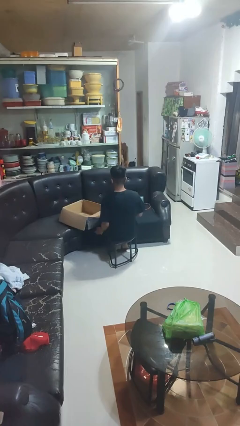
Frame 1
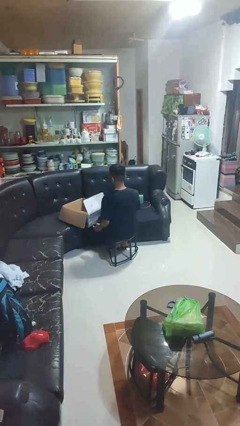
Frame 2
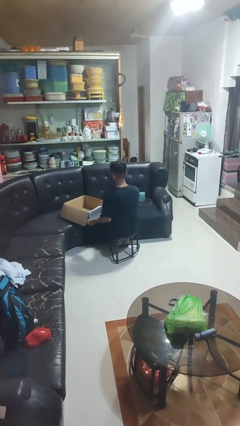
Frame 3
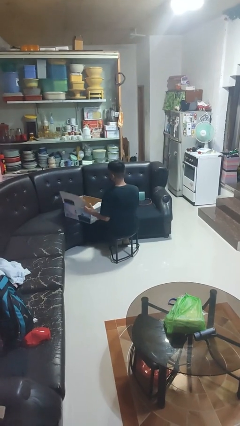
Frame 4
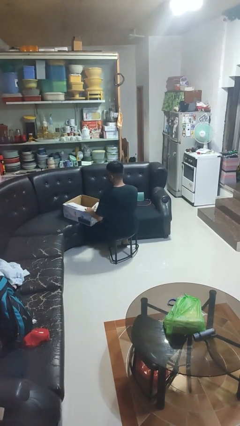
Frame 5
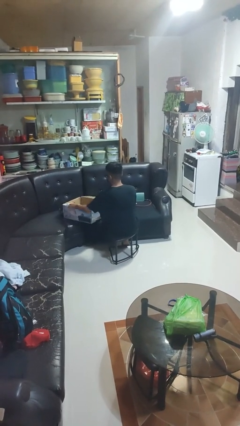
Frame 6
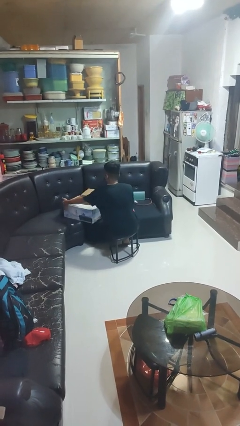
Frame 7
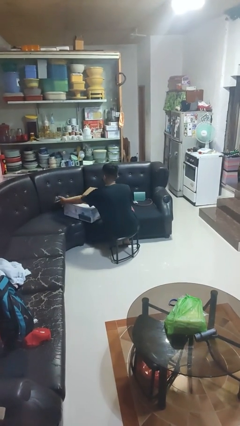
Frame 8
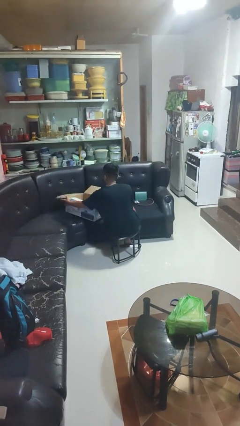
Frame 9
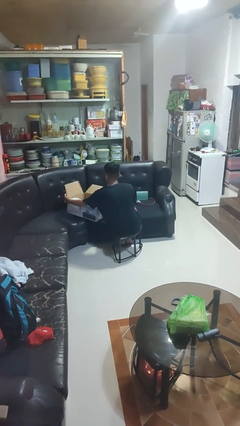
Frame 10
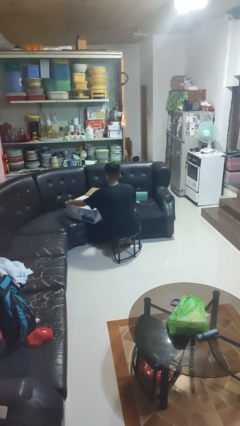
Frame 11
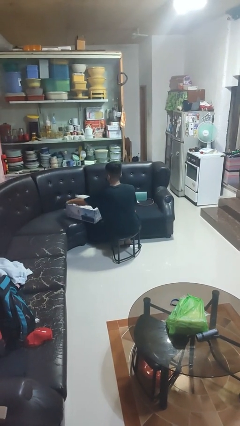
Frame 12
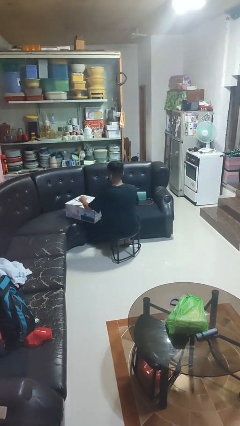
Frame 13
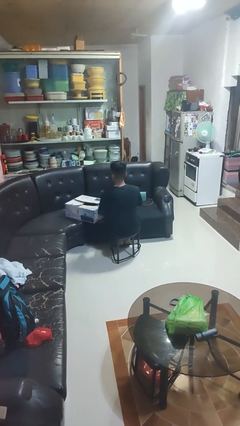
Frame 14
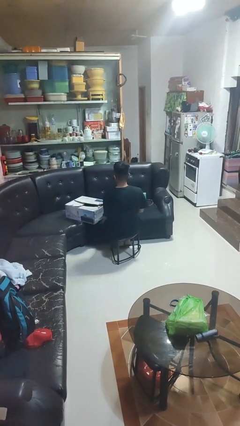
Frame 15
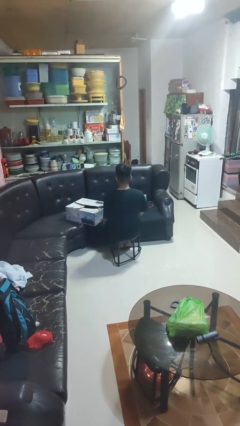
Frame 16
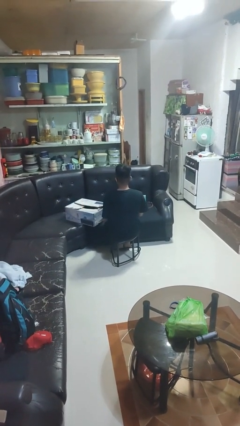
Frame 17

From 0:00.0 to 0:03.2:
person closes box

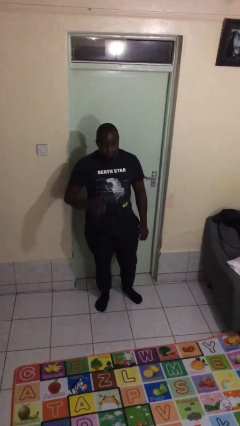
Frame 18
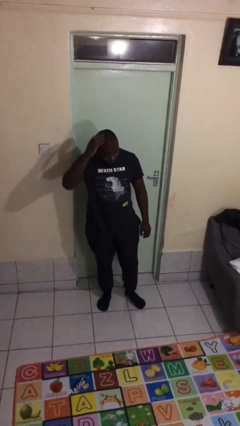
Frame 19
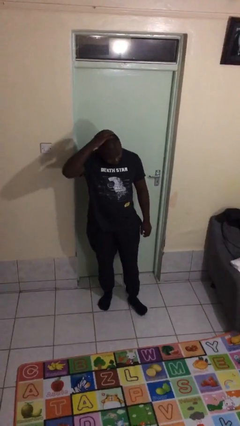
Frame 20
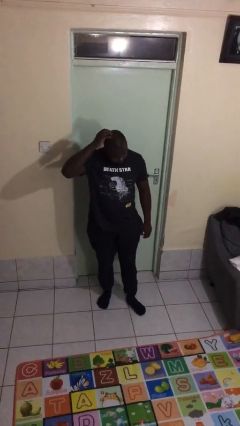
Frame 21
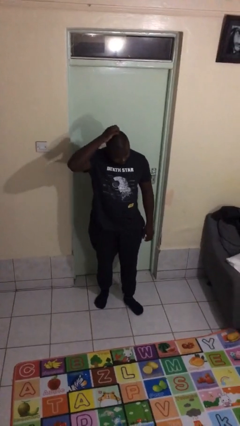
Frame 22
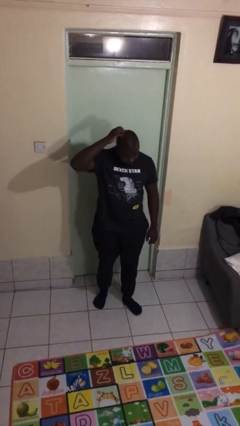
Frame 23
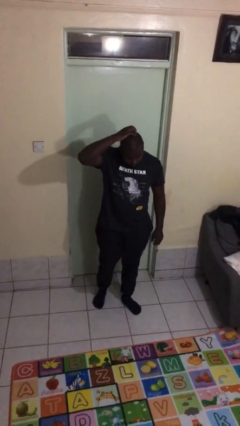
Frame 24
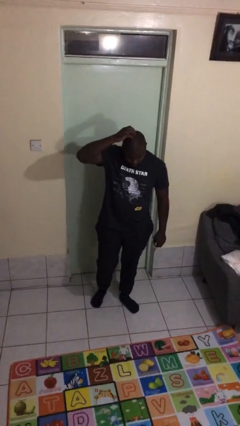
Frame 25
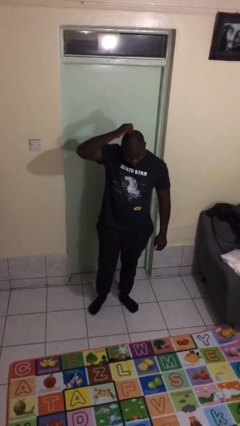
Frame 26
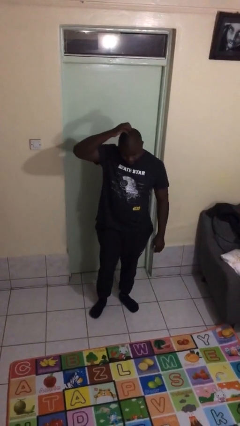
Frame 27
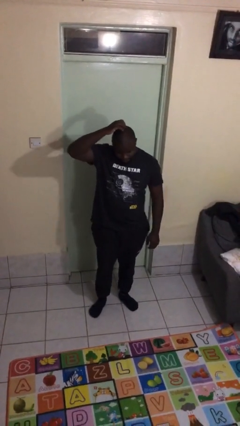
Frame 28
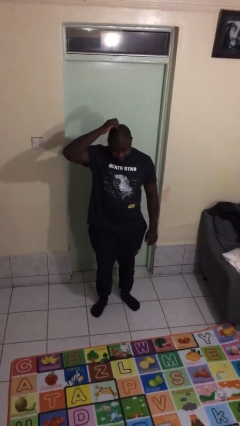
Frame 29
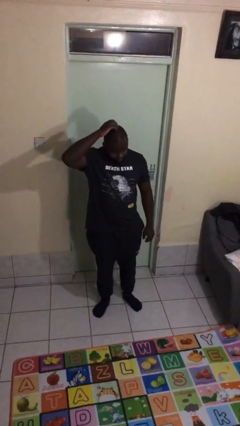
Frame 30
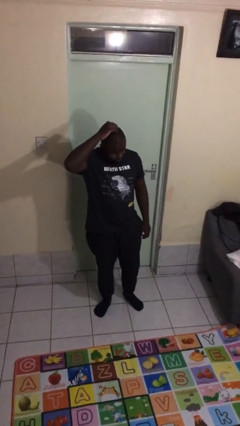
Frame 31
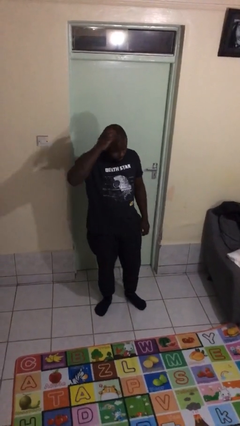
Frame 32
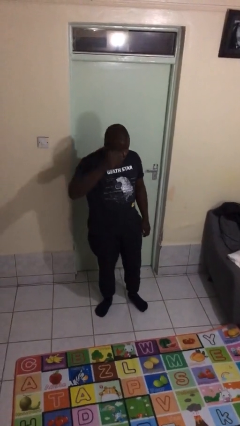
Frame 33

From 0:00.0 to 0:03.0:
person scratches face

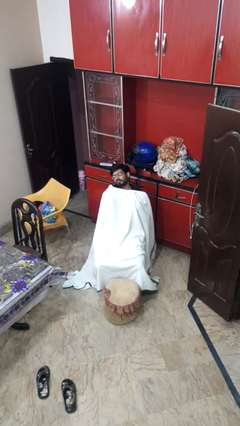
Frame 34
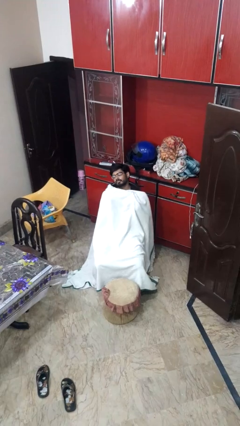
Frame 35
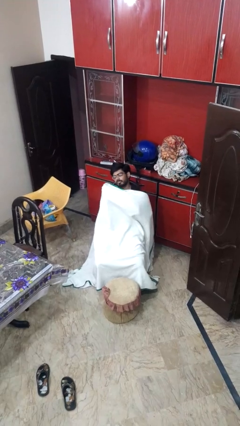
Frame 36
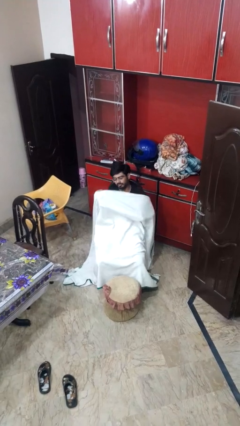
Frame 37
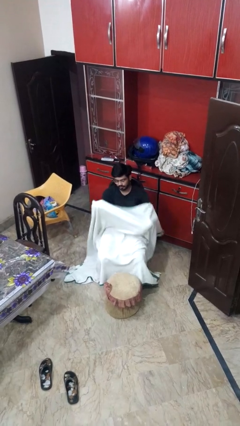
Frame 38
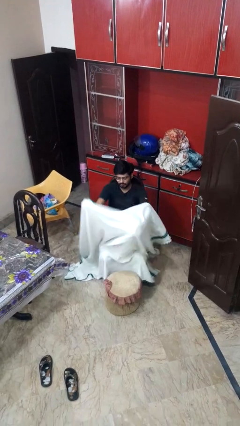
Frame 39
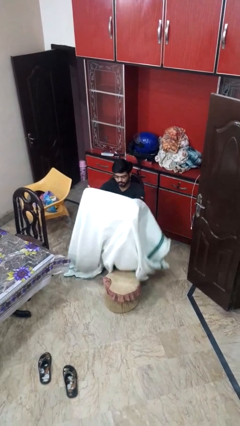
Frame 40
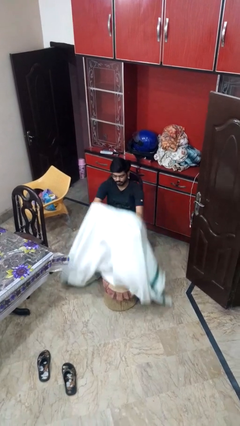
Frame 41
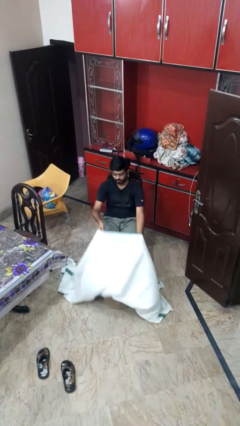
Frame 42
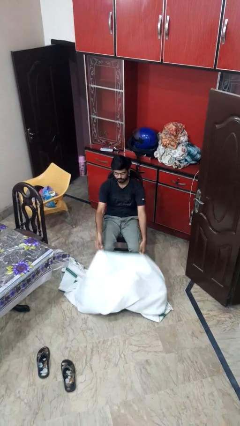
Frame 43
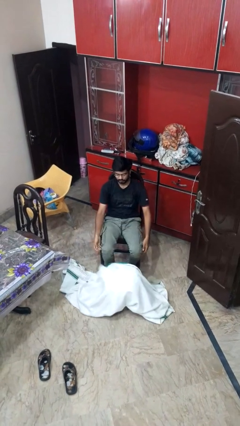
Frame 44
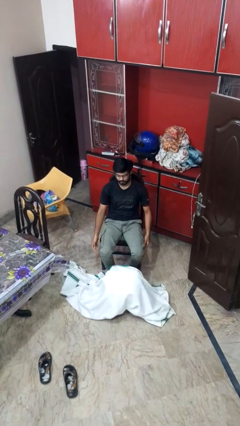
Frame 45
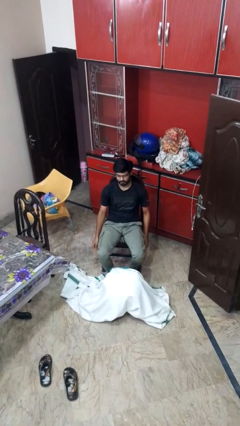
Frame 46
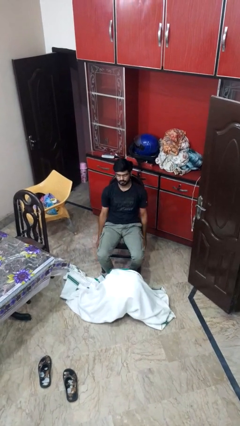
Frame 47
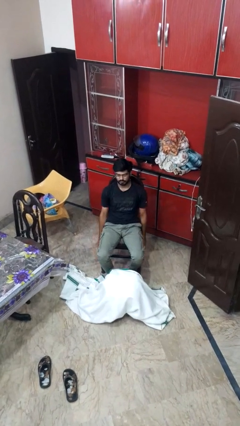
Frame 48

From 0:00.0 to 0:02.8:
person uncovers with blanket

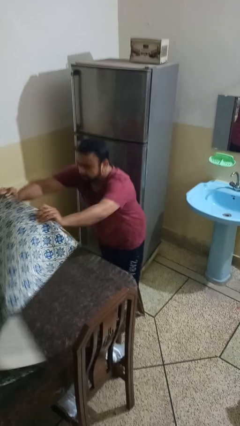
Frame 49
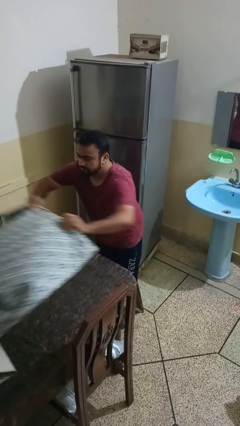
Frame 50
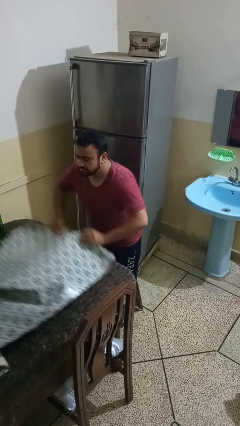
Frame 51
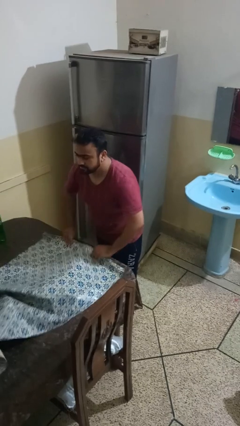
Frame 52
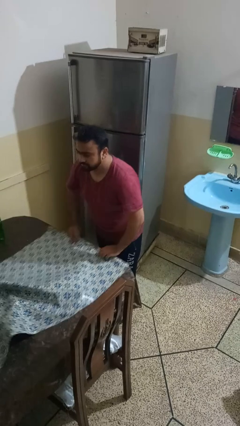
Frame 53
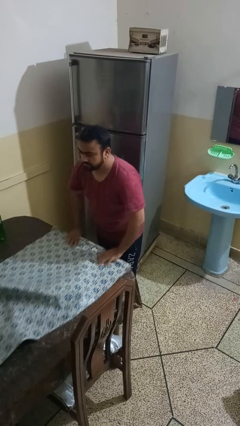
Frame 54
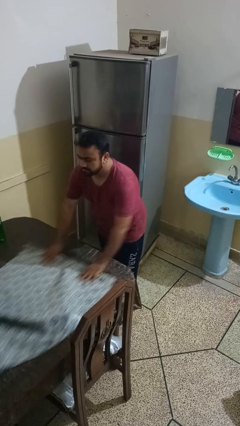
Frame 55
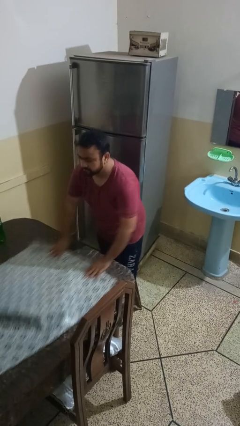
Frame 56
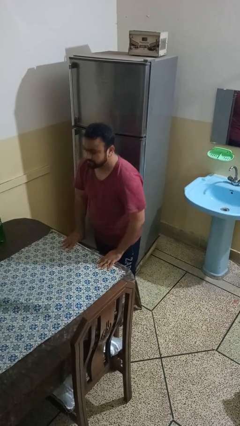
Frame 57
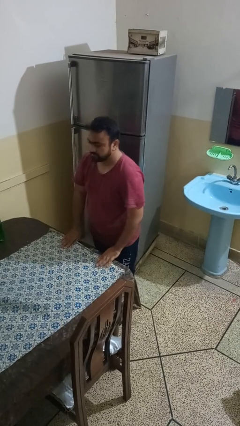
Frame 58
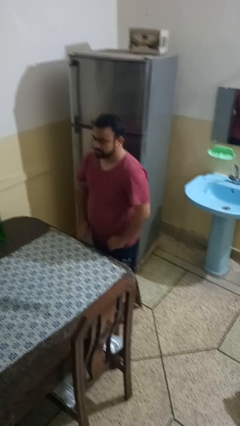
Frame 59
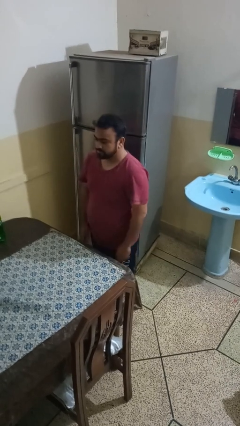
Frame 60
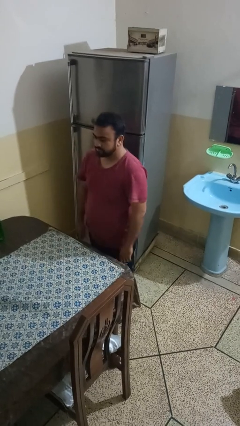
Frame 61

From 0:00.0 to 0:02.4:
person spreads tablecloth

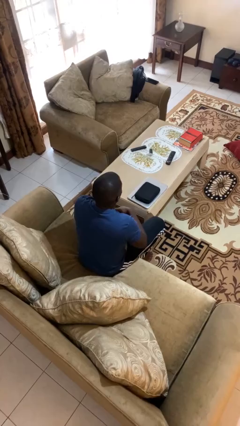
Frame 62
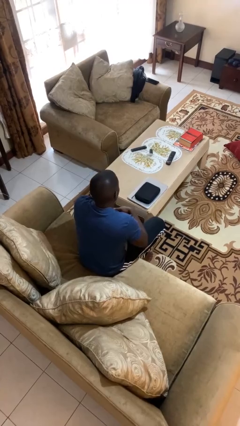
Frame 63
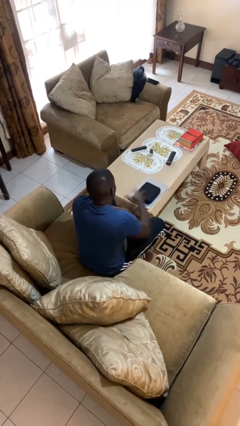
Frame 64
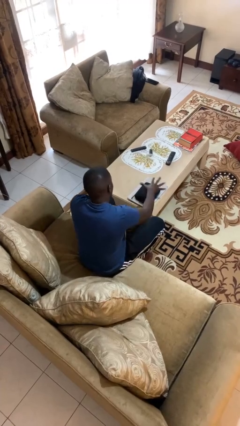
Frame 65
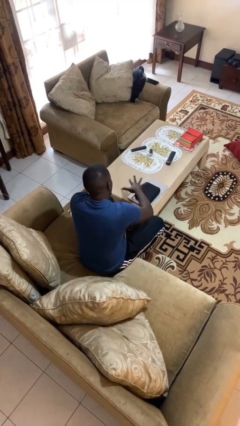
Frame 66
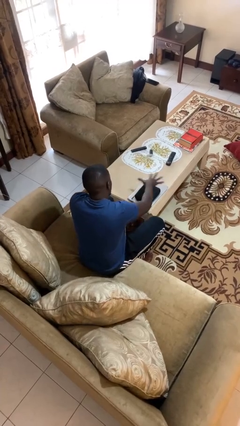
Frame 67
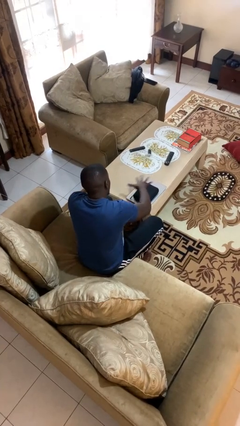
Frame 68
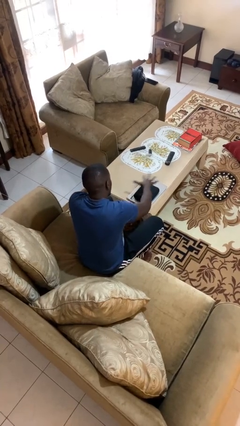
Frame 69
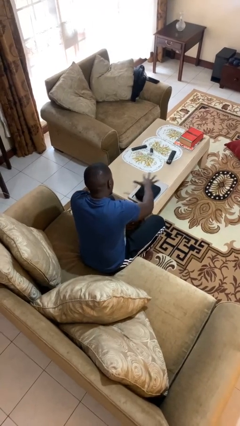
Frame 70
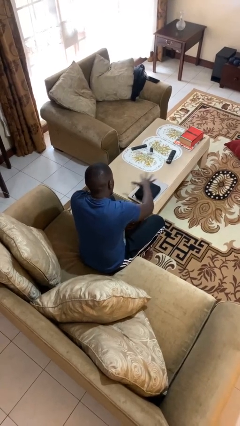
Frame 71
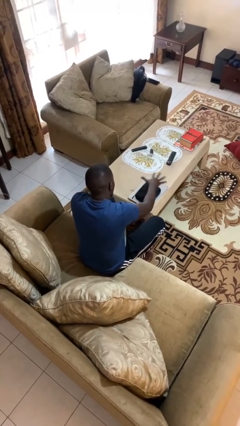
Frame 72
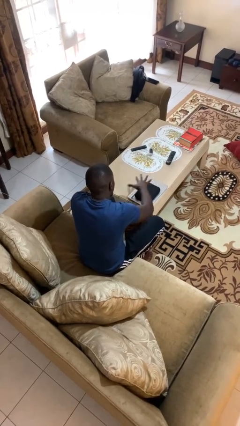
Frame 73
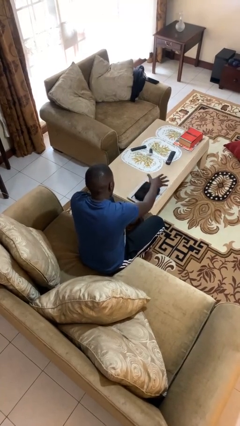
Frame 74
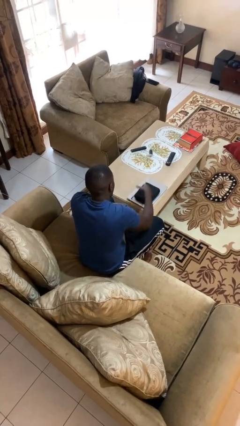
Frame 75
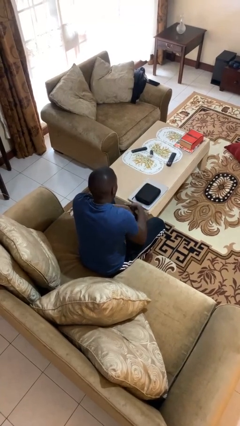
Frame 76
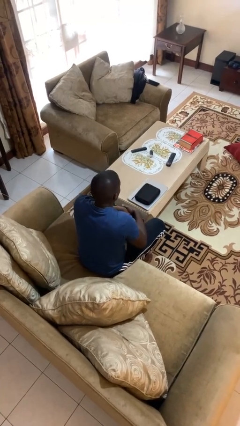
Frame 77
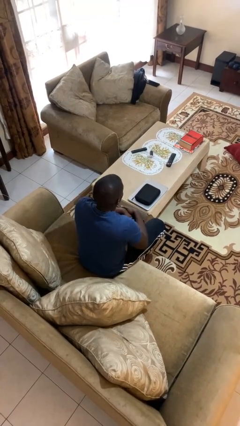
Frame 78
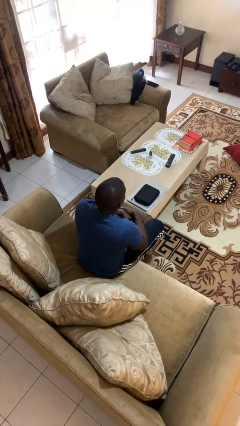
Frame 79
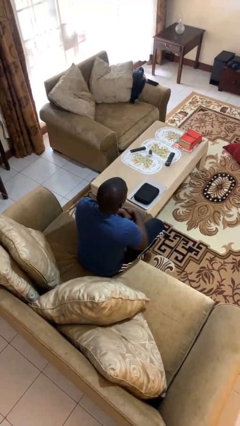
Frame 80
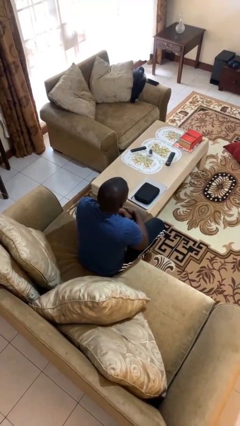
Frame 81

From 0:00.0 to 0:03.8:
person waves hand over object

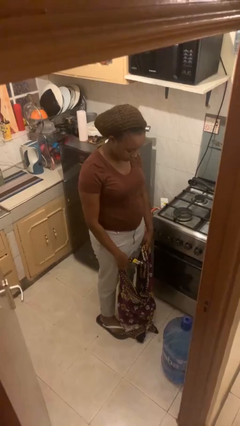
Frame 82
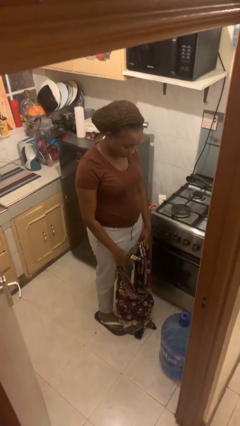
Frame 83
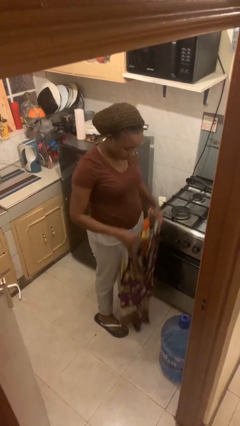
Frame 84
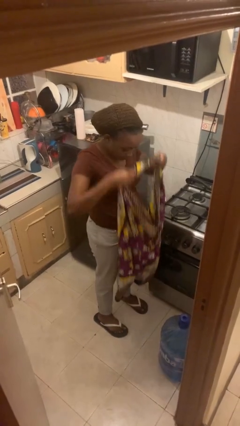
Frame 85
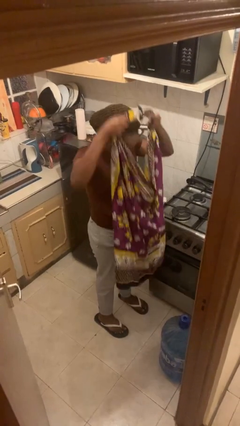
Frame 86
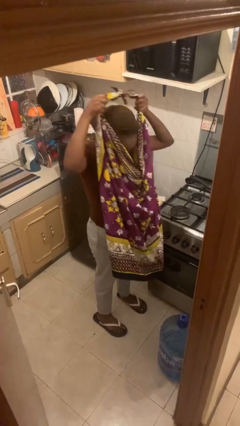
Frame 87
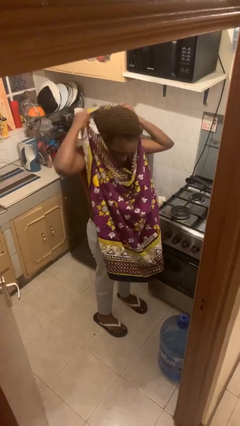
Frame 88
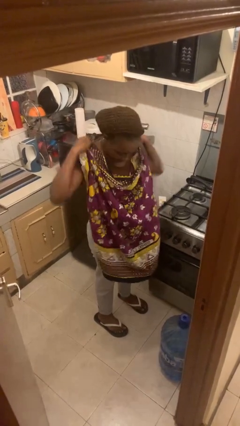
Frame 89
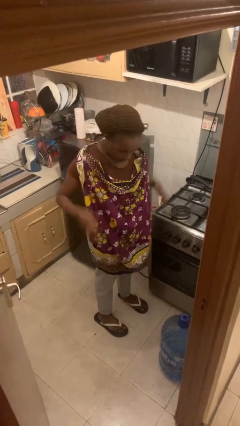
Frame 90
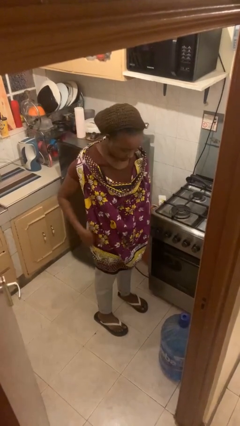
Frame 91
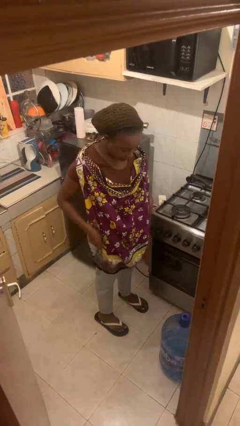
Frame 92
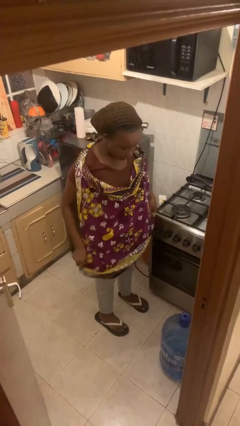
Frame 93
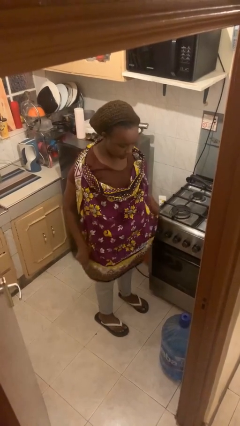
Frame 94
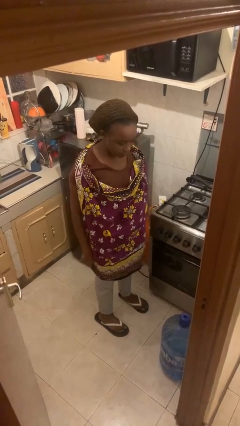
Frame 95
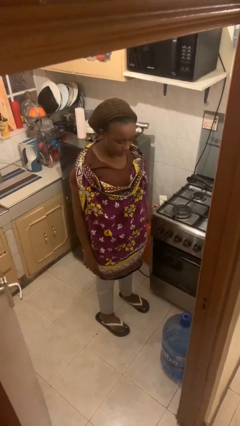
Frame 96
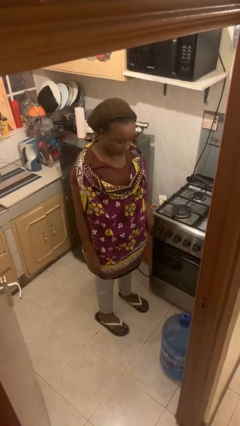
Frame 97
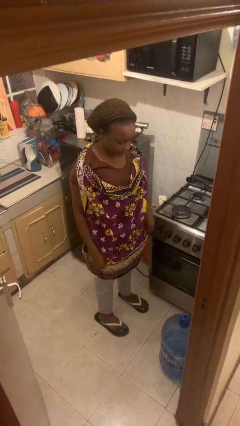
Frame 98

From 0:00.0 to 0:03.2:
person puts on apron
